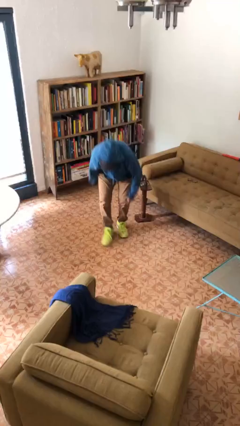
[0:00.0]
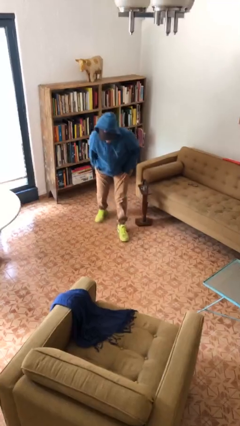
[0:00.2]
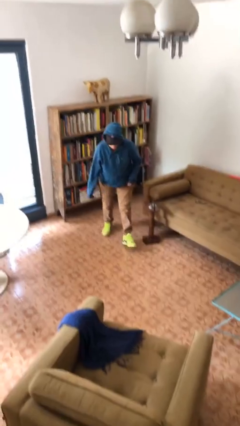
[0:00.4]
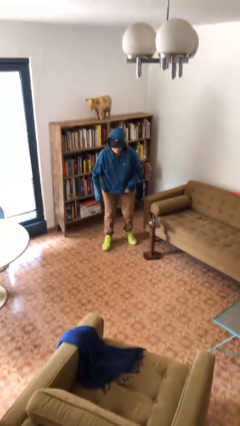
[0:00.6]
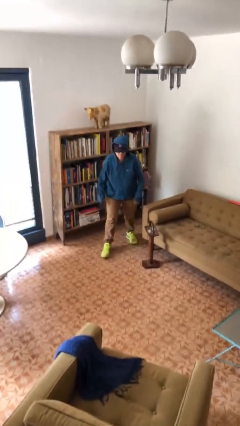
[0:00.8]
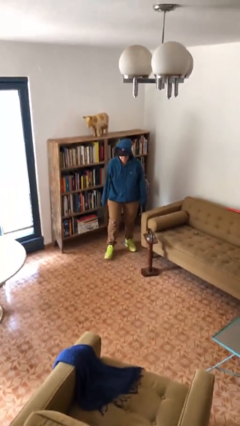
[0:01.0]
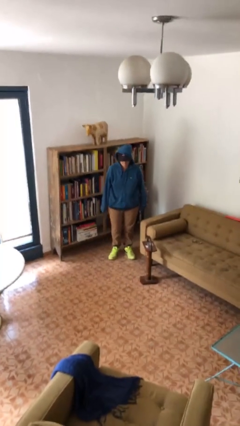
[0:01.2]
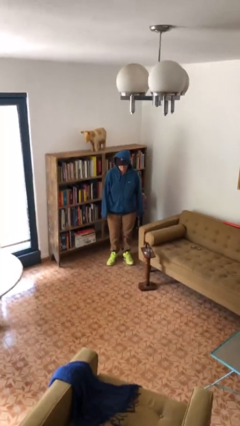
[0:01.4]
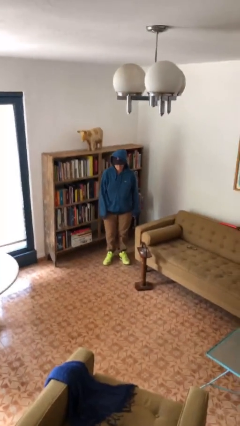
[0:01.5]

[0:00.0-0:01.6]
person stands up from floor

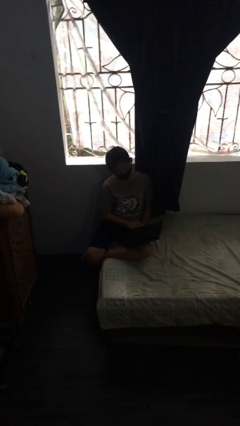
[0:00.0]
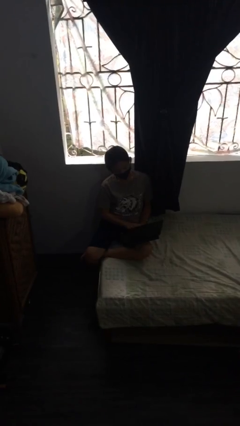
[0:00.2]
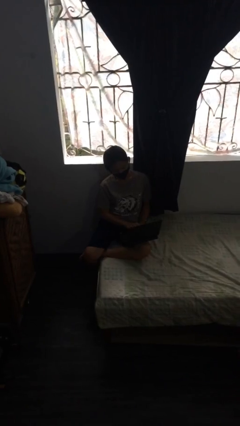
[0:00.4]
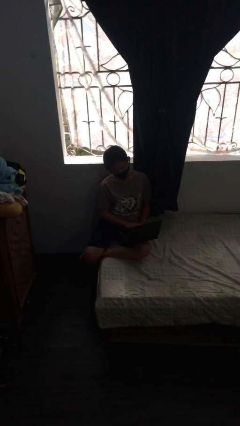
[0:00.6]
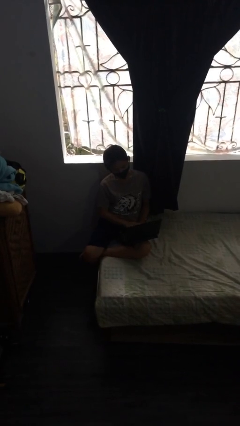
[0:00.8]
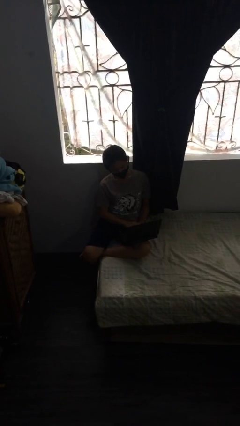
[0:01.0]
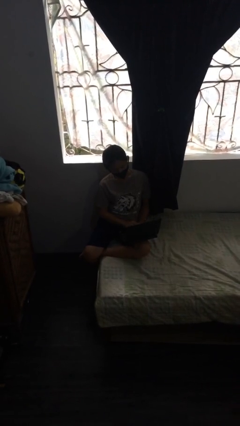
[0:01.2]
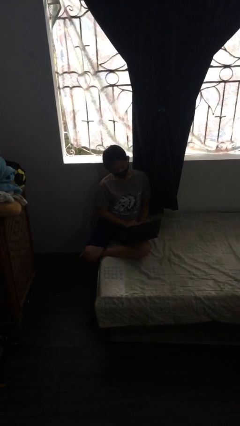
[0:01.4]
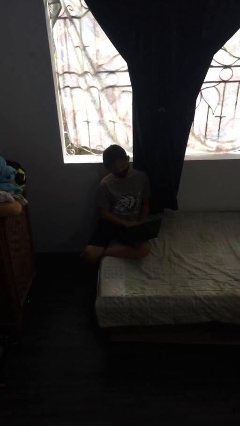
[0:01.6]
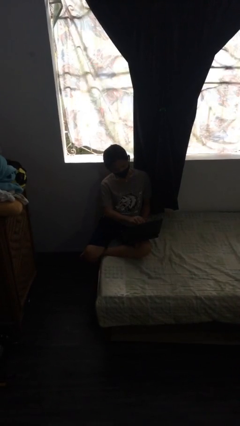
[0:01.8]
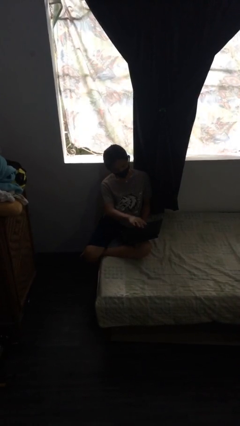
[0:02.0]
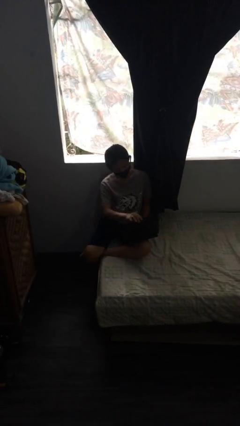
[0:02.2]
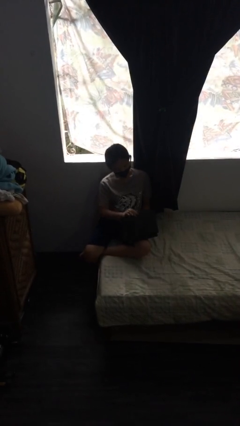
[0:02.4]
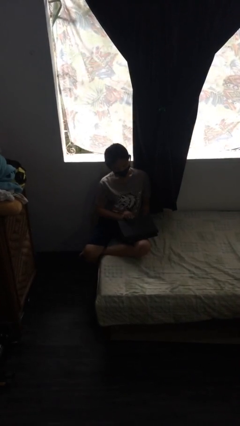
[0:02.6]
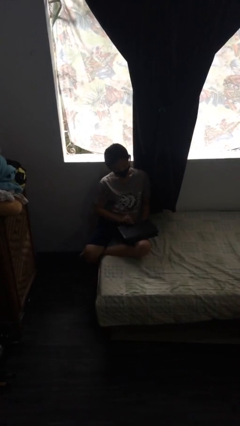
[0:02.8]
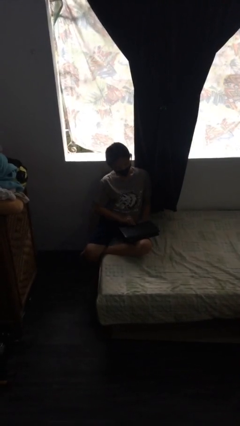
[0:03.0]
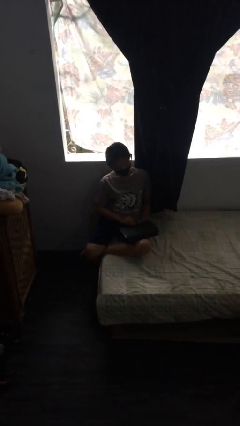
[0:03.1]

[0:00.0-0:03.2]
person interacts with laptop

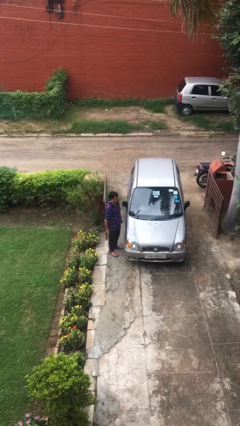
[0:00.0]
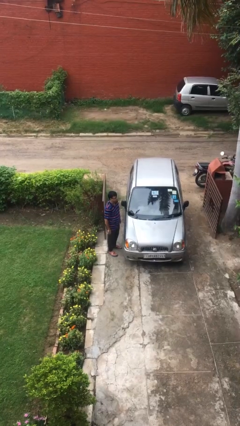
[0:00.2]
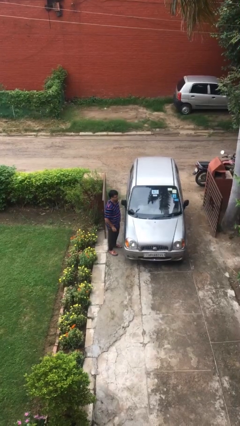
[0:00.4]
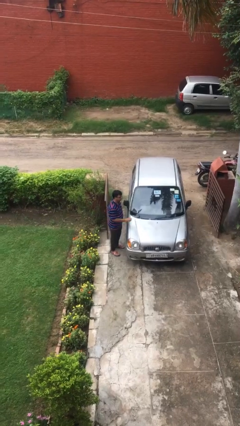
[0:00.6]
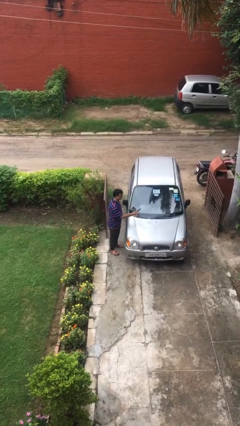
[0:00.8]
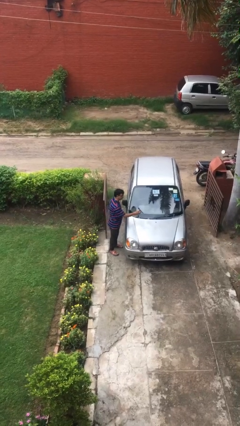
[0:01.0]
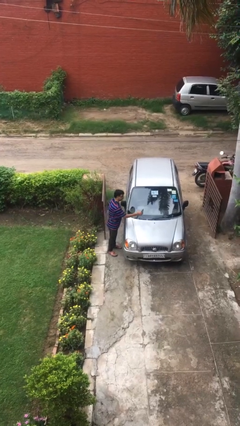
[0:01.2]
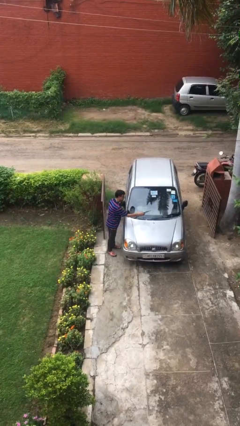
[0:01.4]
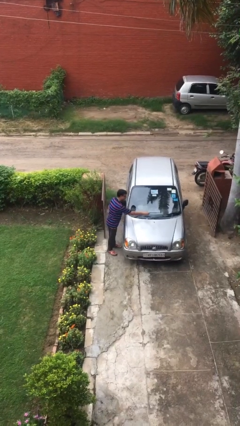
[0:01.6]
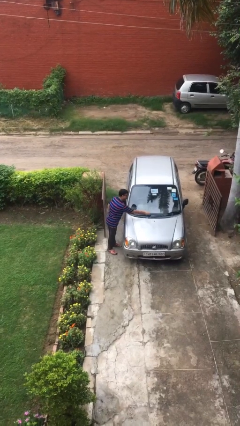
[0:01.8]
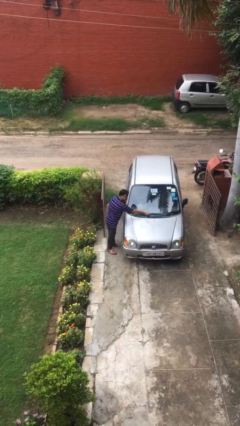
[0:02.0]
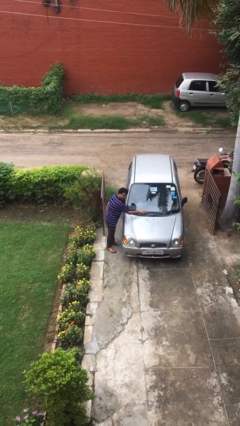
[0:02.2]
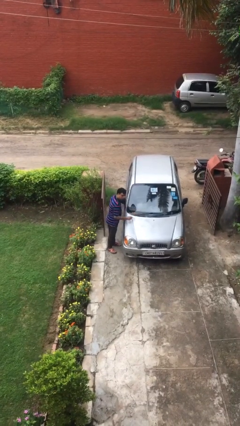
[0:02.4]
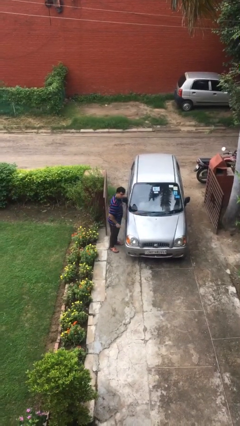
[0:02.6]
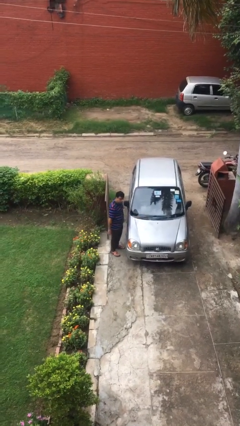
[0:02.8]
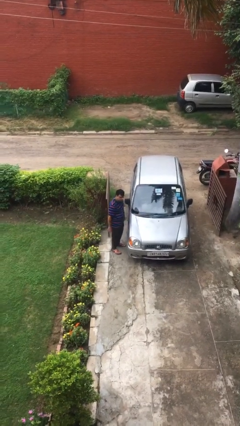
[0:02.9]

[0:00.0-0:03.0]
person flips down car wipers

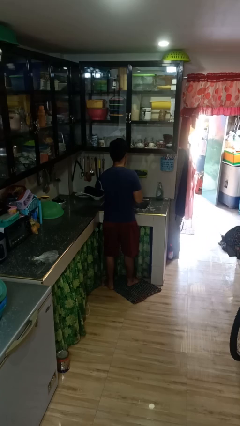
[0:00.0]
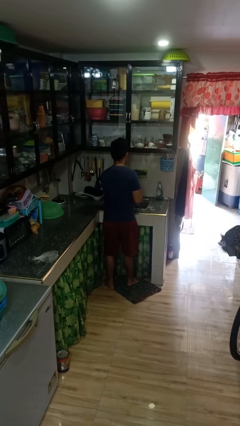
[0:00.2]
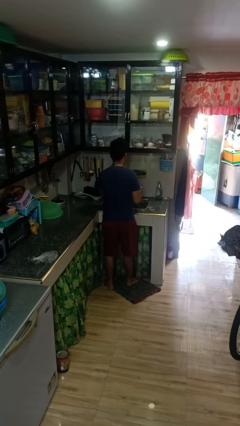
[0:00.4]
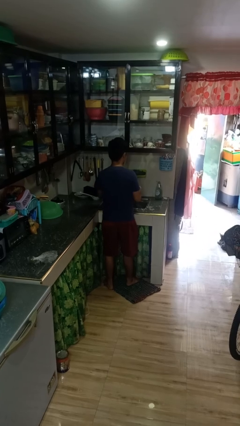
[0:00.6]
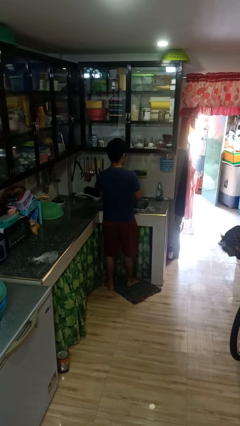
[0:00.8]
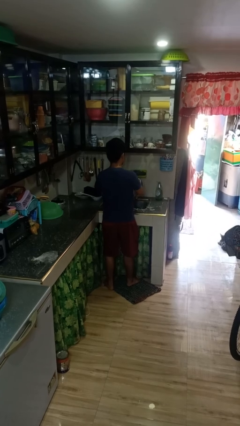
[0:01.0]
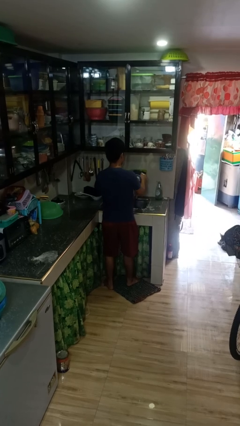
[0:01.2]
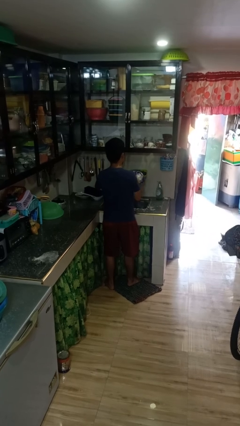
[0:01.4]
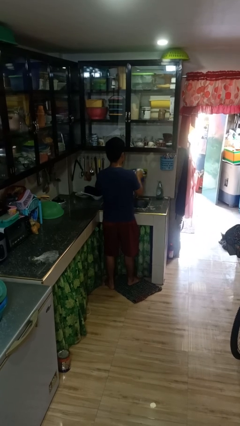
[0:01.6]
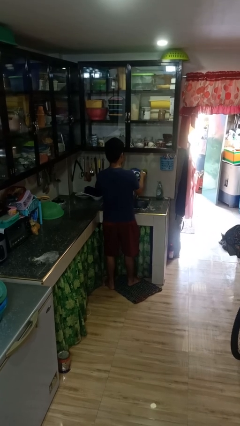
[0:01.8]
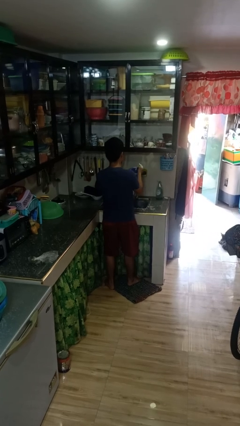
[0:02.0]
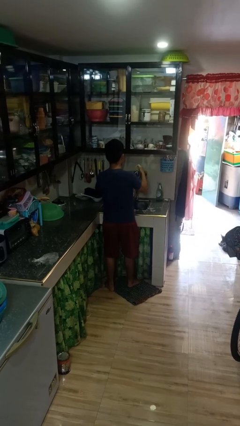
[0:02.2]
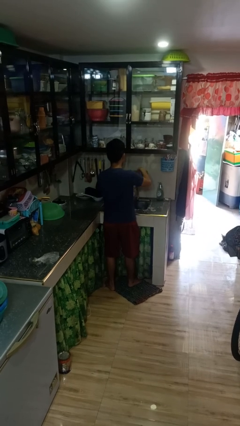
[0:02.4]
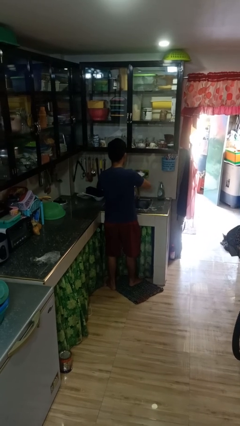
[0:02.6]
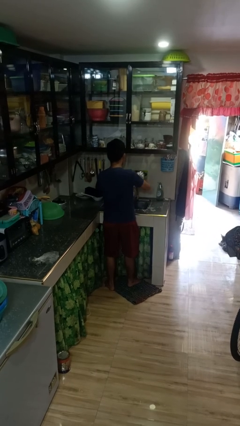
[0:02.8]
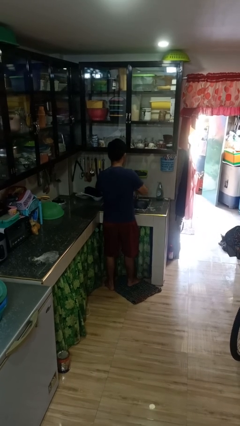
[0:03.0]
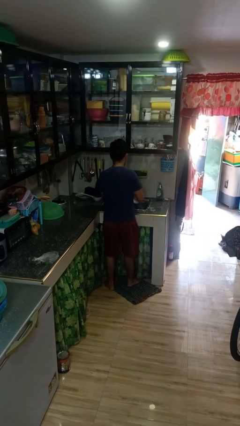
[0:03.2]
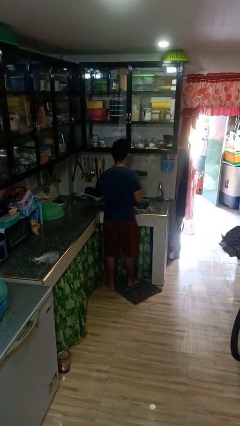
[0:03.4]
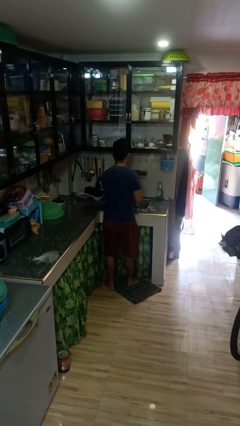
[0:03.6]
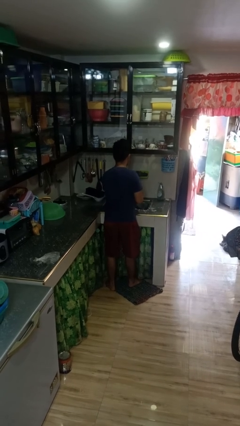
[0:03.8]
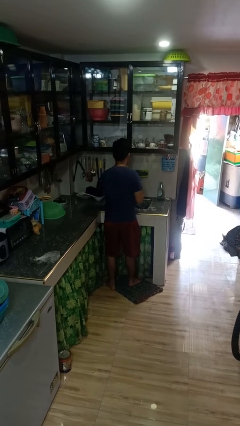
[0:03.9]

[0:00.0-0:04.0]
person washes dish

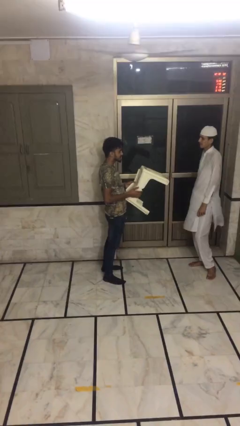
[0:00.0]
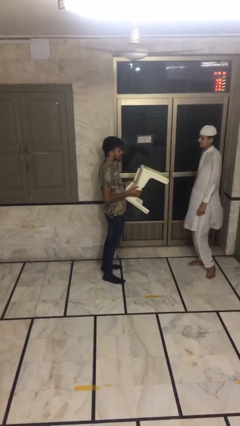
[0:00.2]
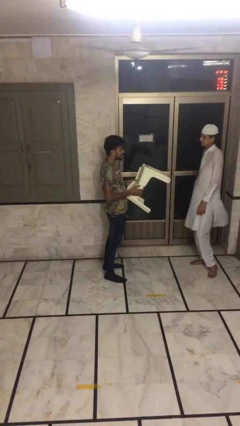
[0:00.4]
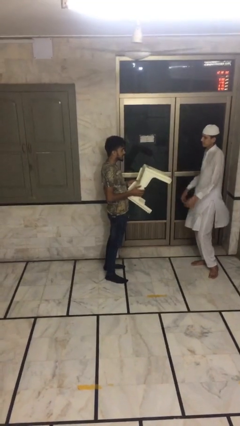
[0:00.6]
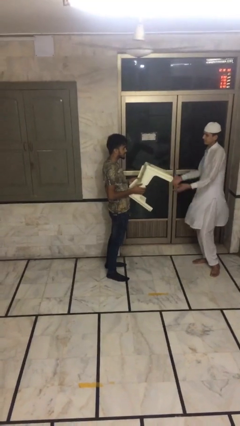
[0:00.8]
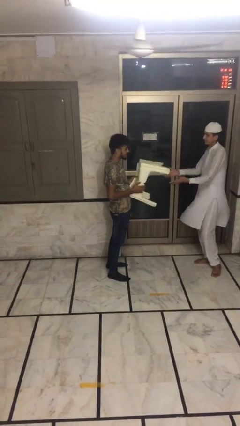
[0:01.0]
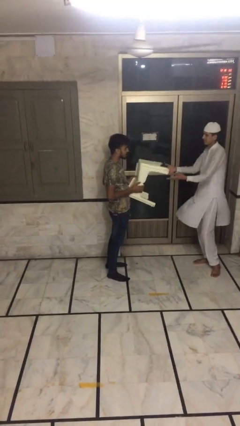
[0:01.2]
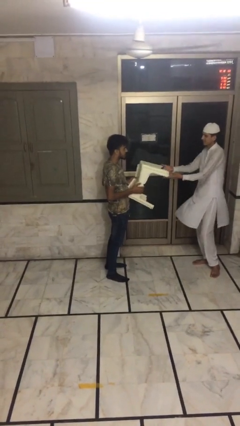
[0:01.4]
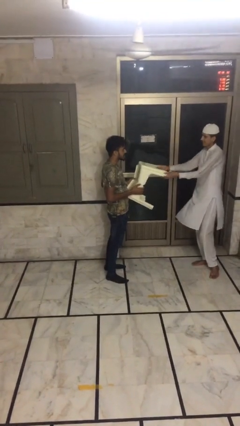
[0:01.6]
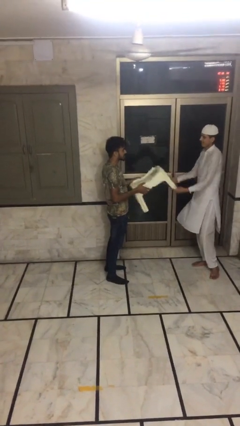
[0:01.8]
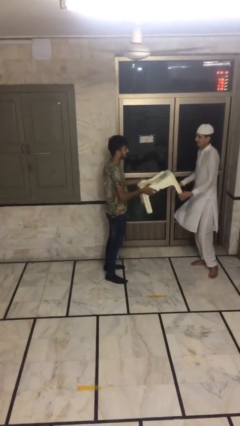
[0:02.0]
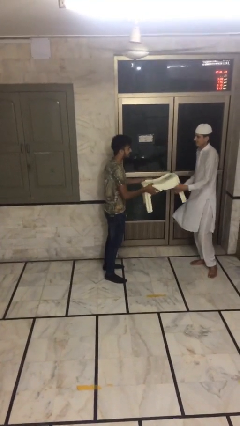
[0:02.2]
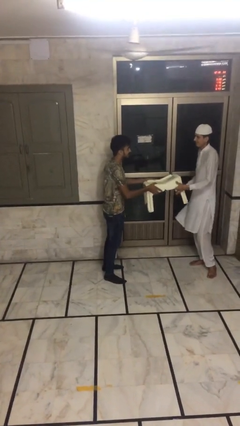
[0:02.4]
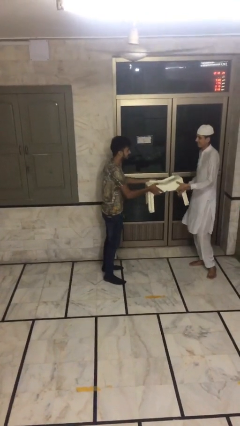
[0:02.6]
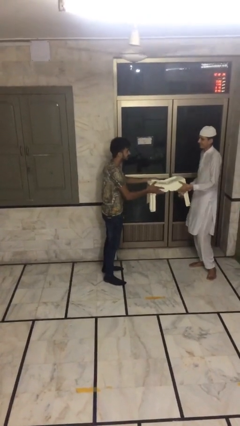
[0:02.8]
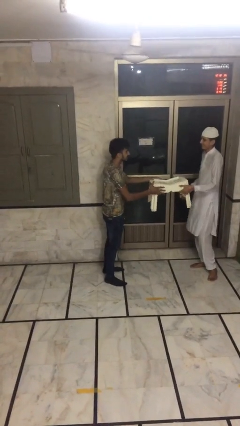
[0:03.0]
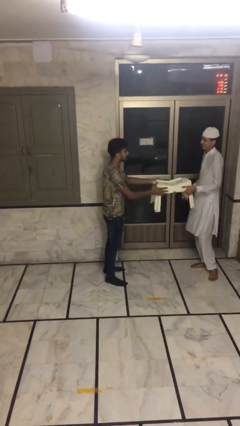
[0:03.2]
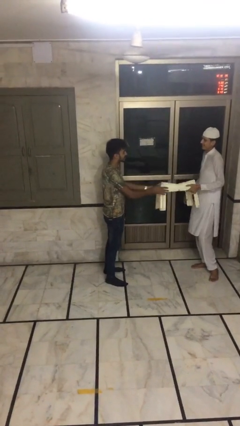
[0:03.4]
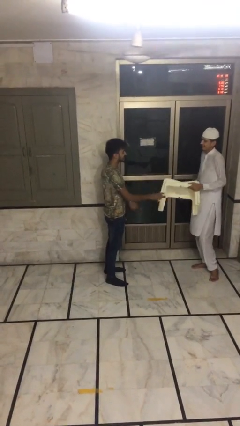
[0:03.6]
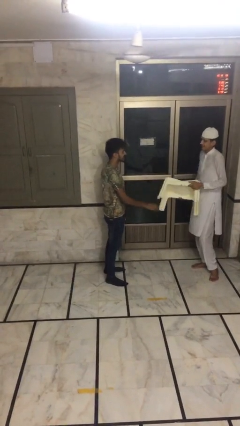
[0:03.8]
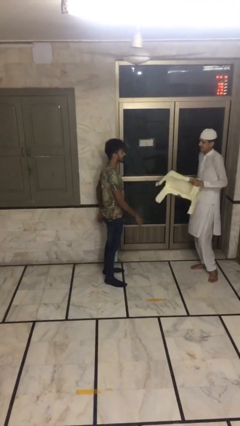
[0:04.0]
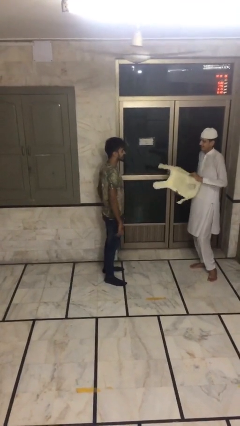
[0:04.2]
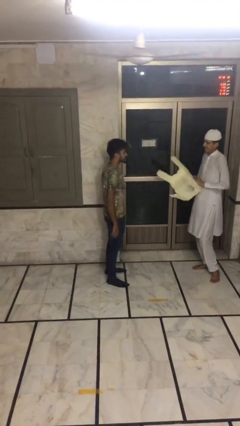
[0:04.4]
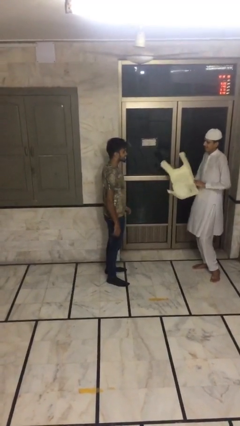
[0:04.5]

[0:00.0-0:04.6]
person transfers object to person

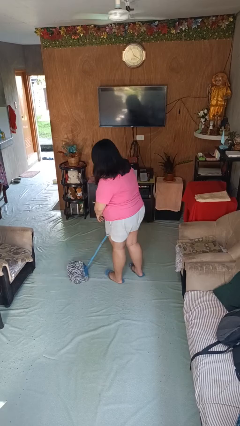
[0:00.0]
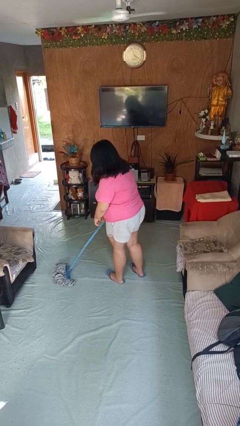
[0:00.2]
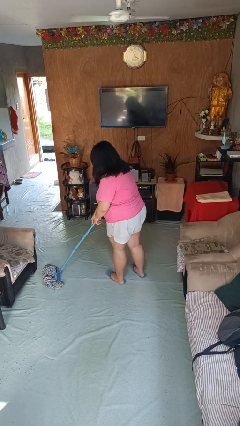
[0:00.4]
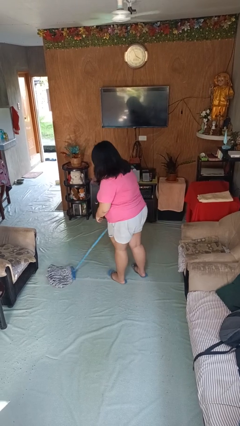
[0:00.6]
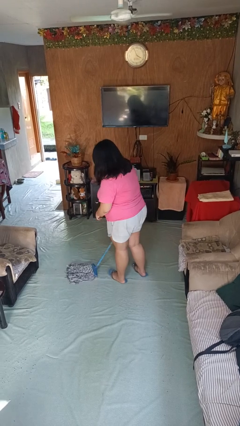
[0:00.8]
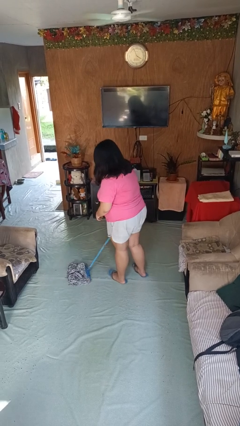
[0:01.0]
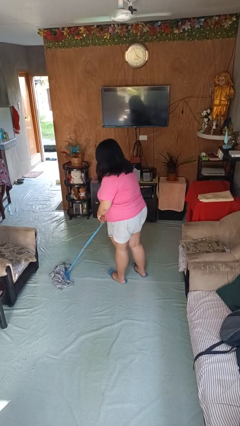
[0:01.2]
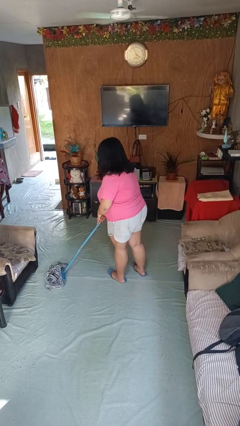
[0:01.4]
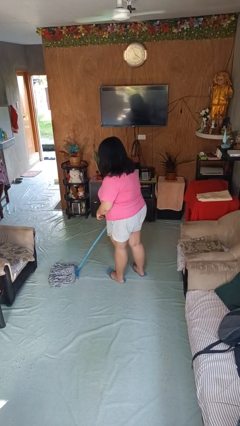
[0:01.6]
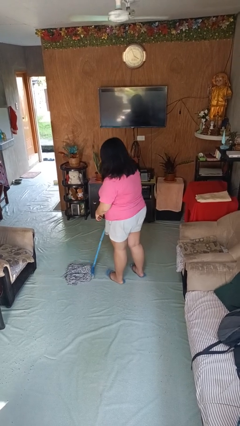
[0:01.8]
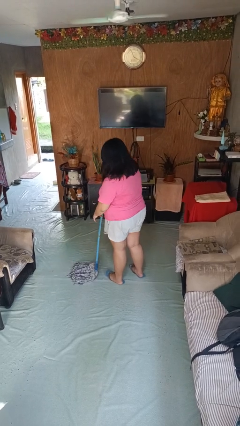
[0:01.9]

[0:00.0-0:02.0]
person mops
